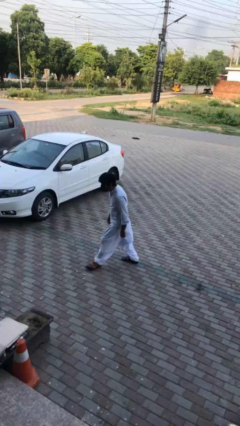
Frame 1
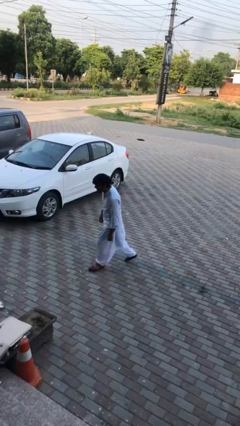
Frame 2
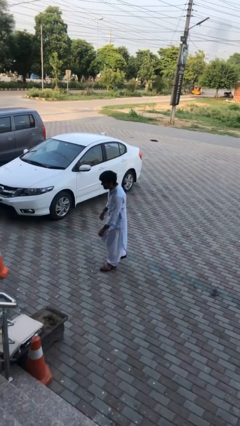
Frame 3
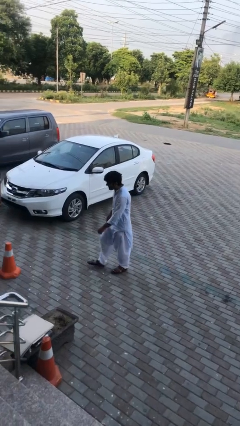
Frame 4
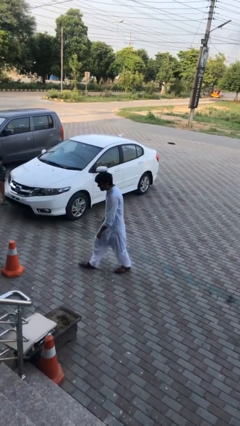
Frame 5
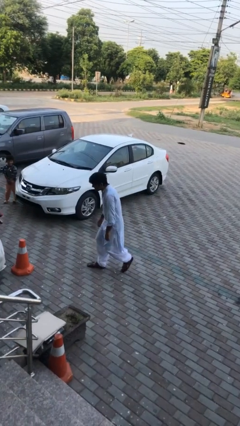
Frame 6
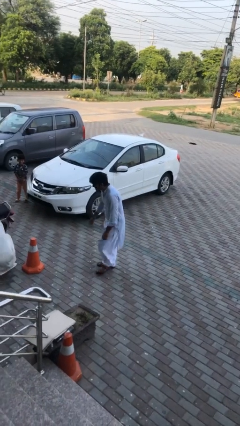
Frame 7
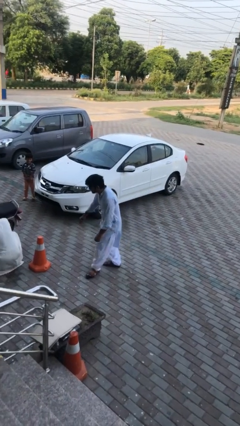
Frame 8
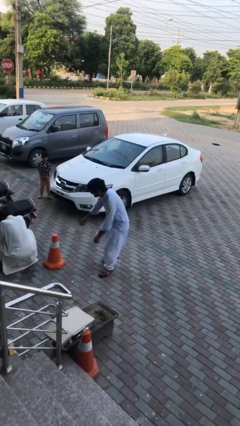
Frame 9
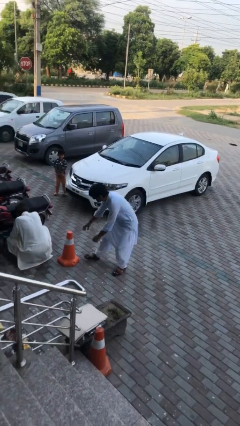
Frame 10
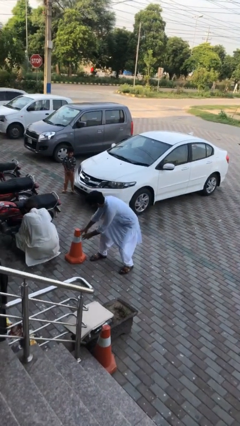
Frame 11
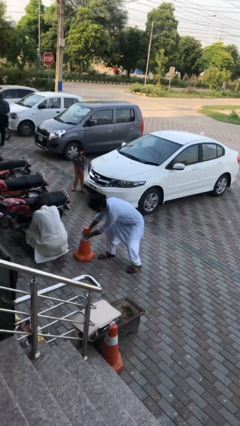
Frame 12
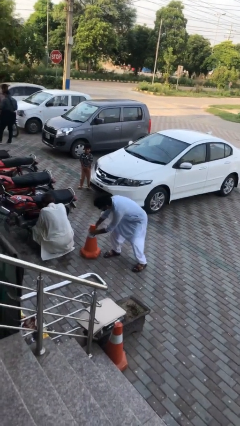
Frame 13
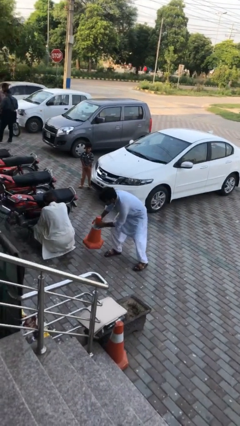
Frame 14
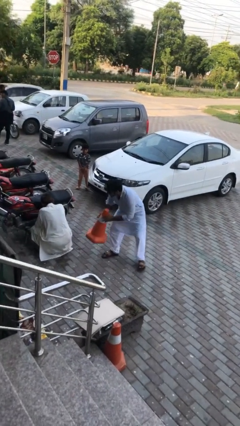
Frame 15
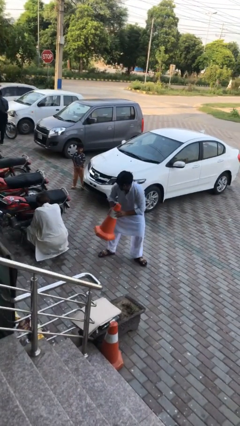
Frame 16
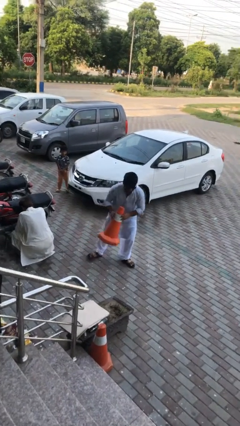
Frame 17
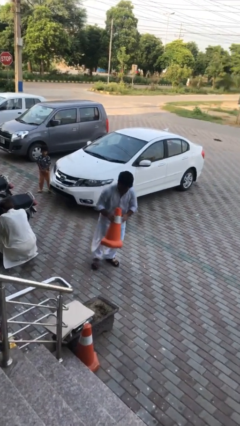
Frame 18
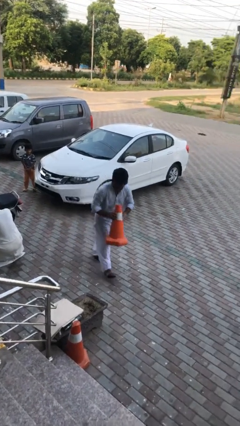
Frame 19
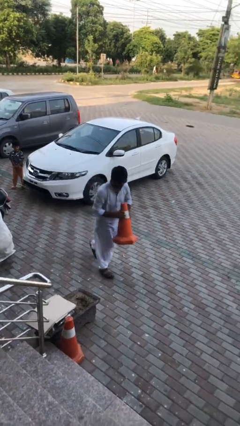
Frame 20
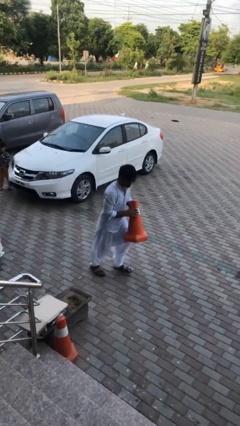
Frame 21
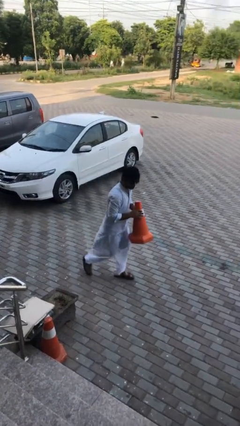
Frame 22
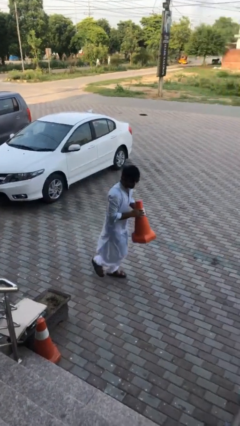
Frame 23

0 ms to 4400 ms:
person steals object from person

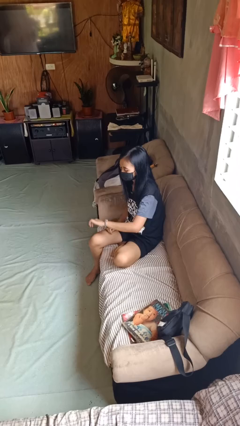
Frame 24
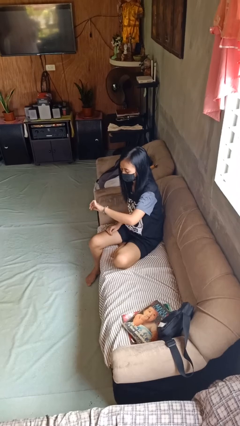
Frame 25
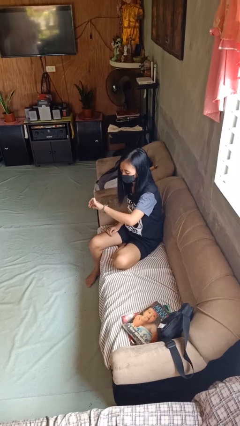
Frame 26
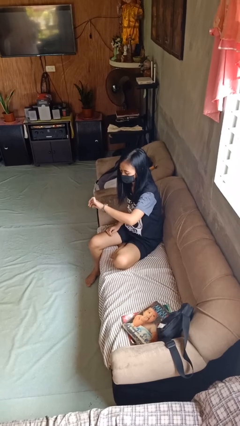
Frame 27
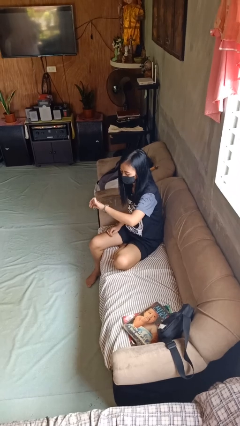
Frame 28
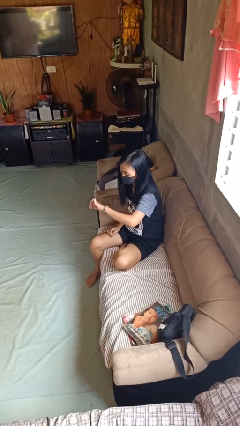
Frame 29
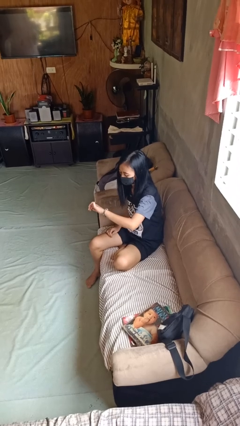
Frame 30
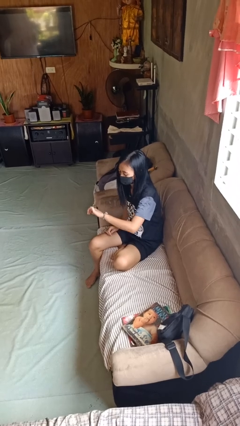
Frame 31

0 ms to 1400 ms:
person looks at wristwatch

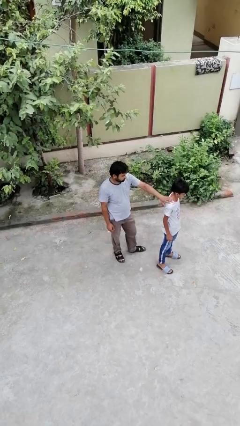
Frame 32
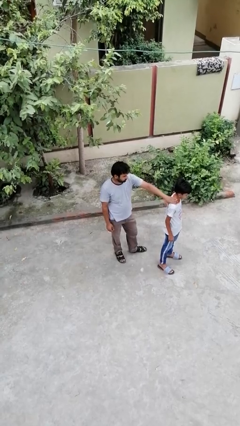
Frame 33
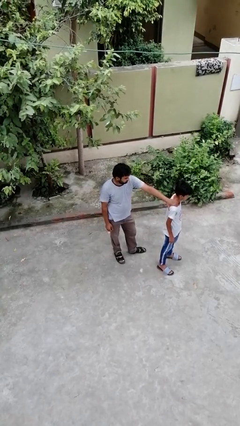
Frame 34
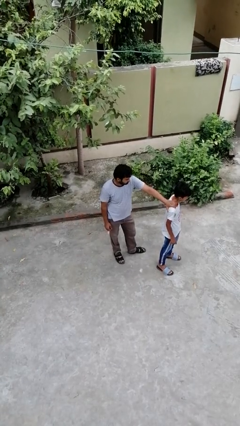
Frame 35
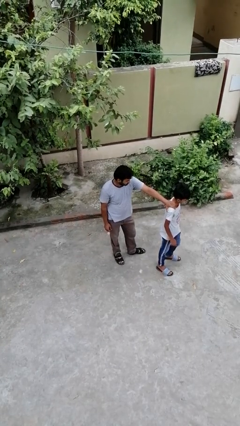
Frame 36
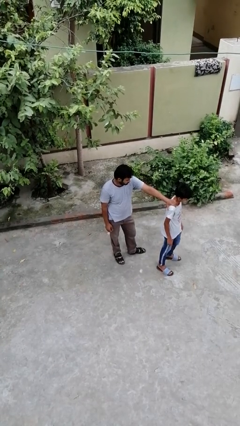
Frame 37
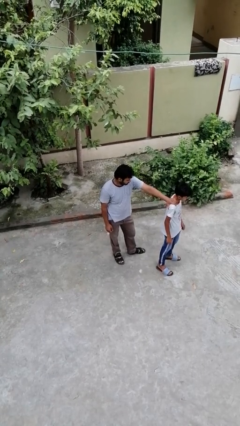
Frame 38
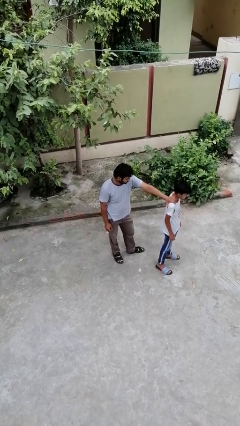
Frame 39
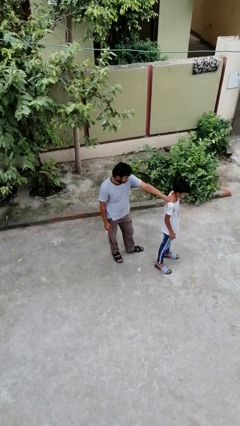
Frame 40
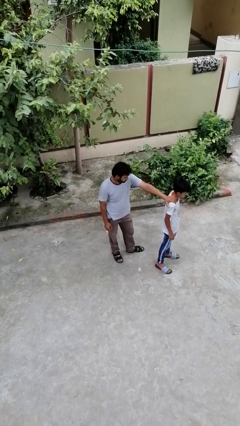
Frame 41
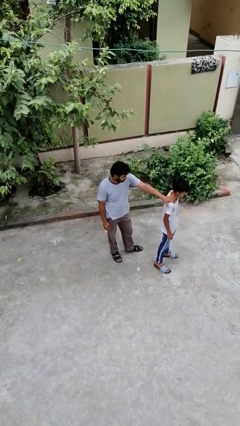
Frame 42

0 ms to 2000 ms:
person grabs person by shoulder

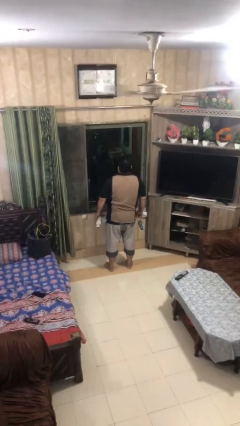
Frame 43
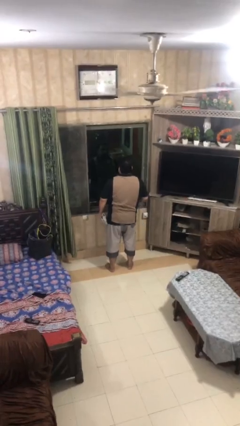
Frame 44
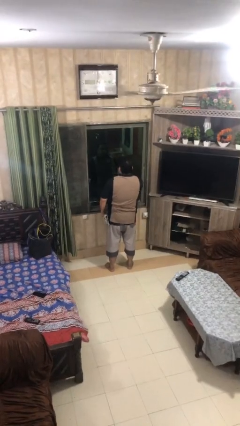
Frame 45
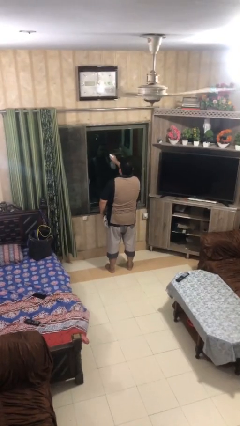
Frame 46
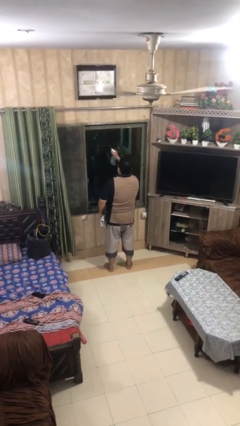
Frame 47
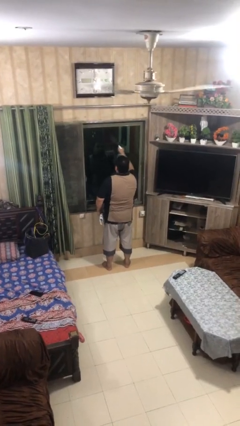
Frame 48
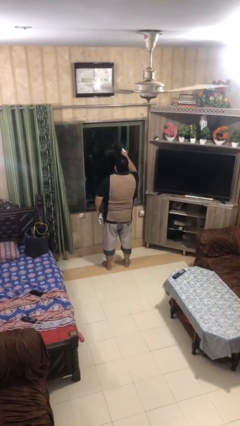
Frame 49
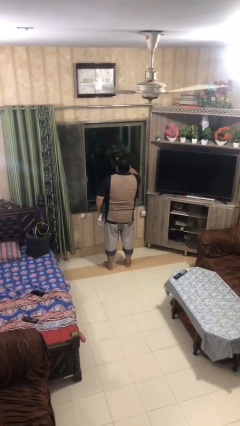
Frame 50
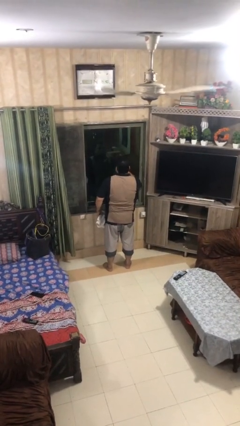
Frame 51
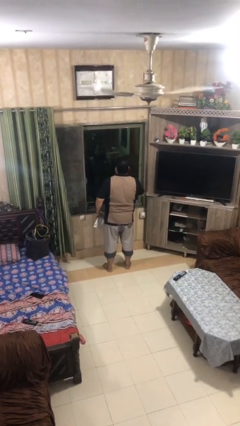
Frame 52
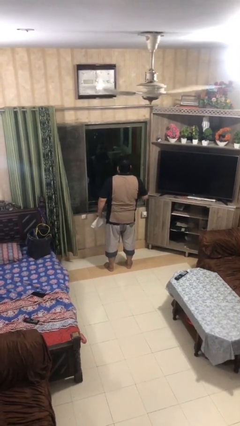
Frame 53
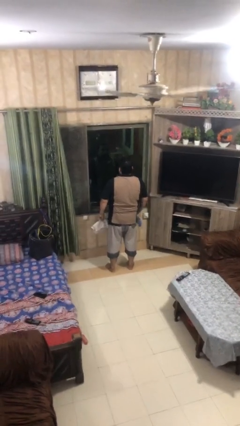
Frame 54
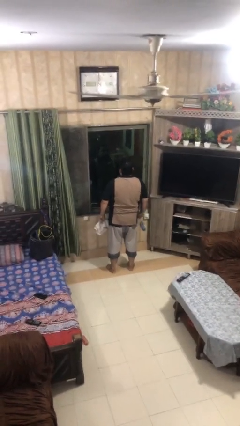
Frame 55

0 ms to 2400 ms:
person sprays from bottle

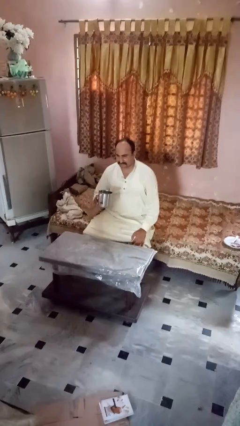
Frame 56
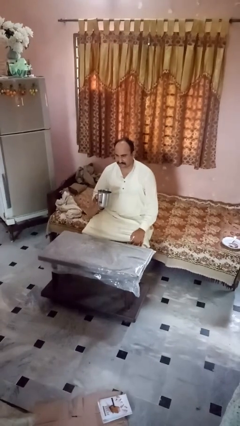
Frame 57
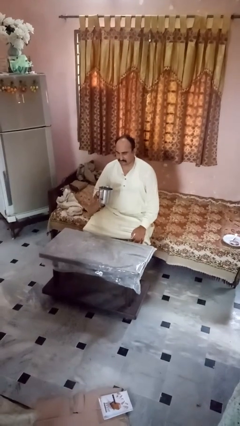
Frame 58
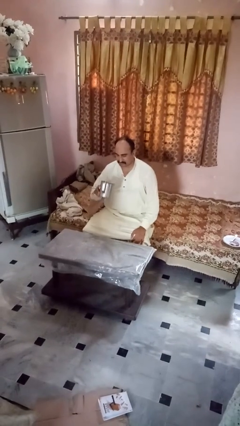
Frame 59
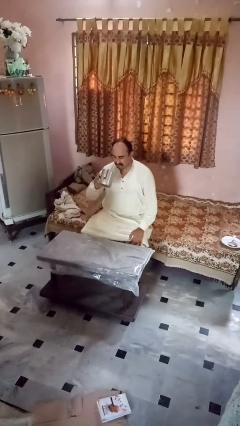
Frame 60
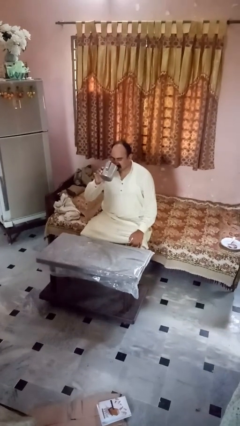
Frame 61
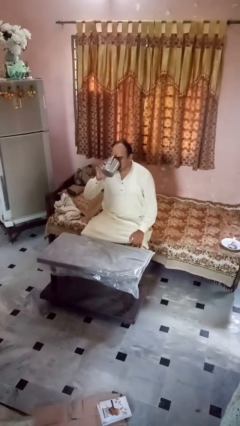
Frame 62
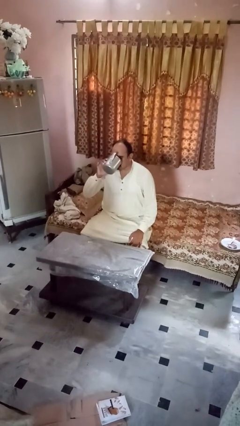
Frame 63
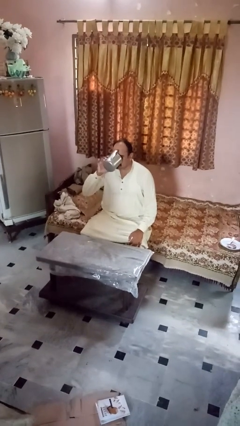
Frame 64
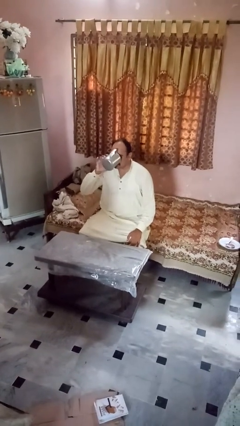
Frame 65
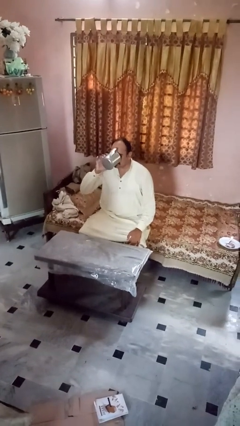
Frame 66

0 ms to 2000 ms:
person drinks from mug

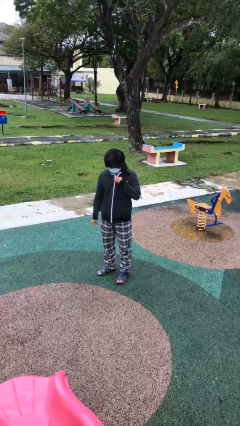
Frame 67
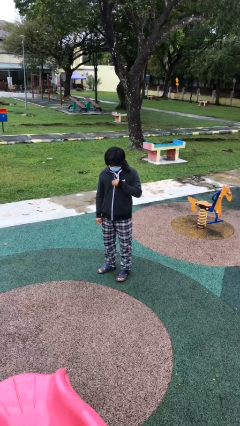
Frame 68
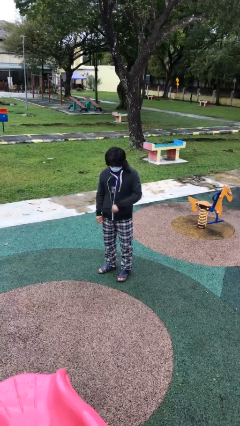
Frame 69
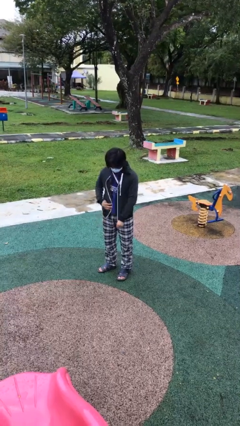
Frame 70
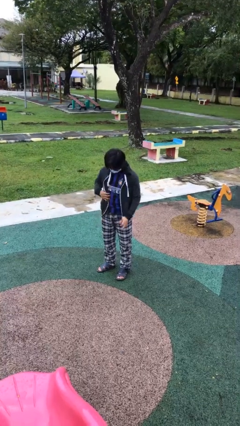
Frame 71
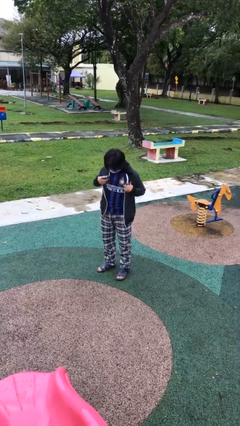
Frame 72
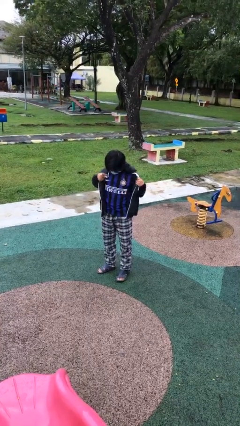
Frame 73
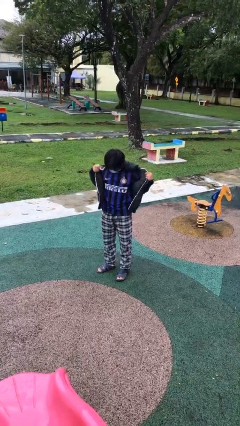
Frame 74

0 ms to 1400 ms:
person unzips jacket

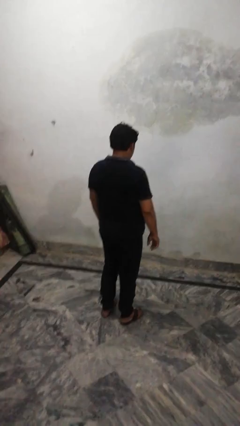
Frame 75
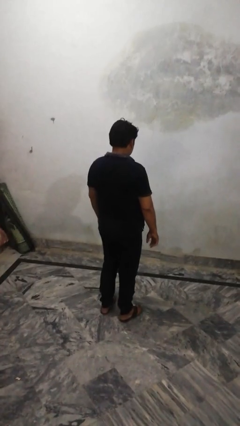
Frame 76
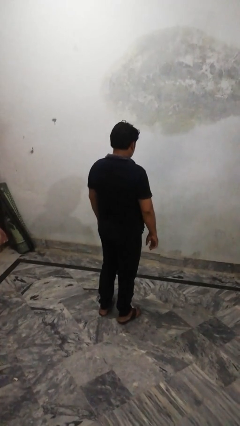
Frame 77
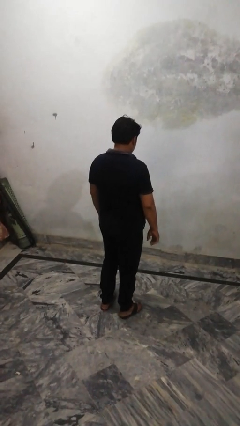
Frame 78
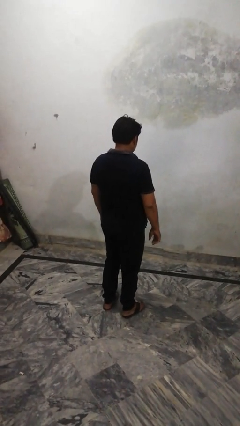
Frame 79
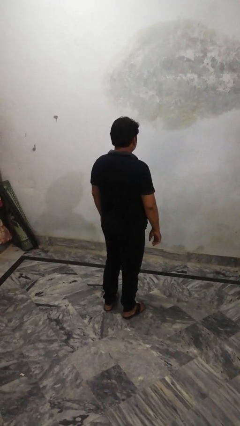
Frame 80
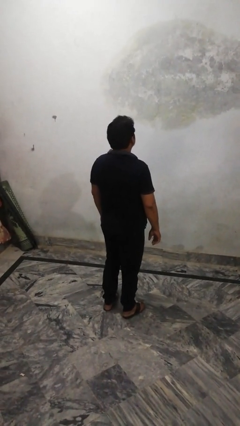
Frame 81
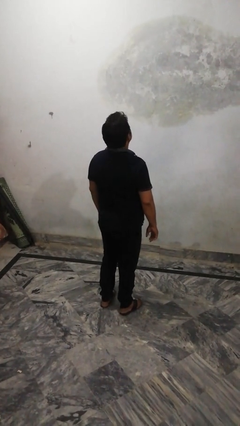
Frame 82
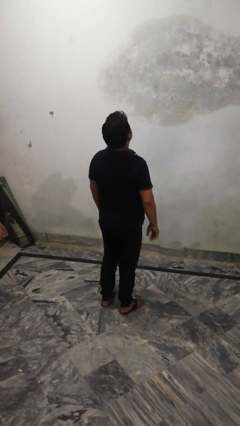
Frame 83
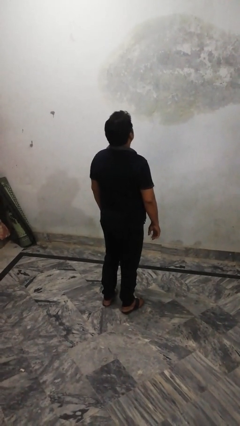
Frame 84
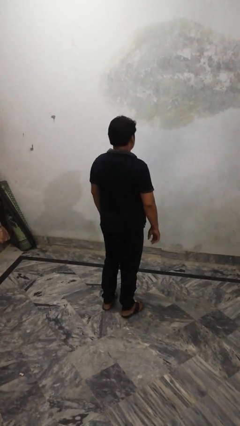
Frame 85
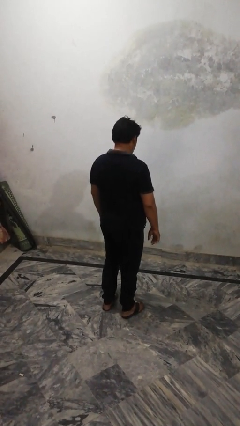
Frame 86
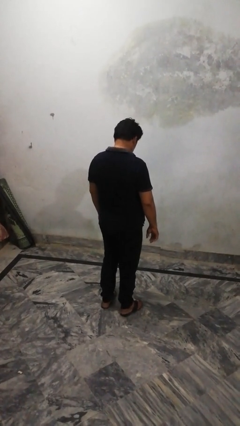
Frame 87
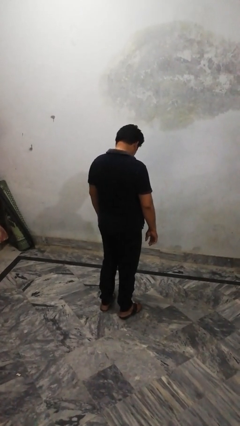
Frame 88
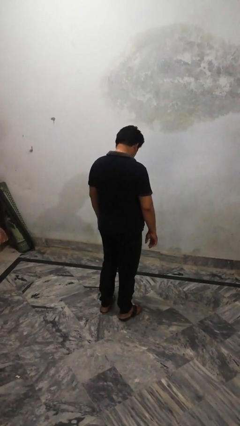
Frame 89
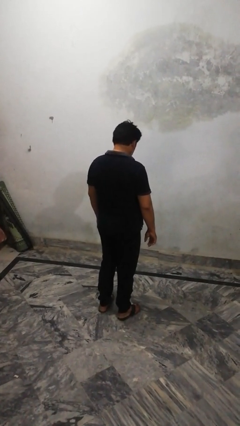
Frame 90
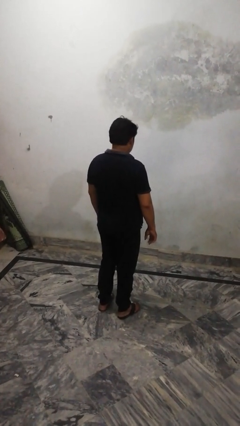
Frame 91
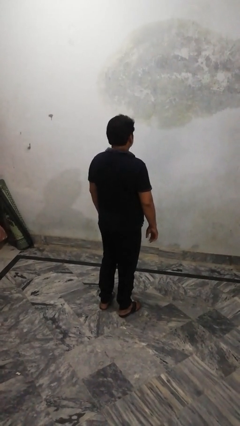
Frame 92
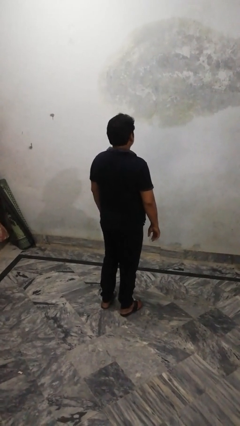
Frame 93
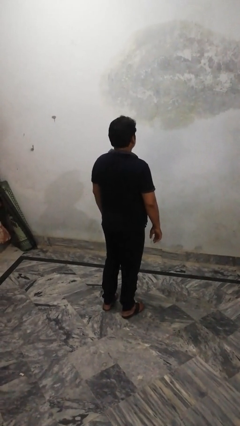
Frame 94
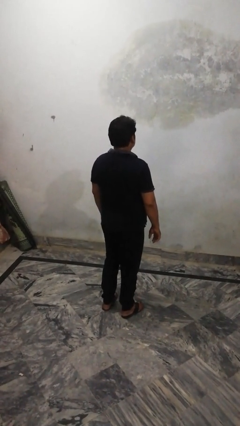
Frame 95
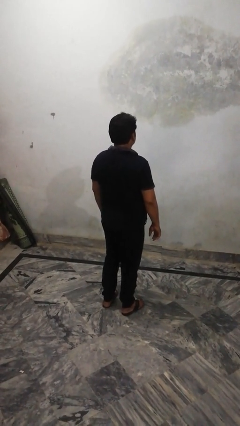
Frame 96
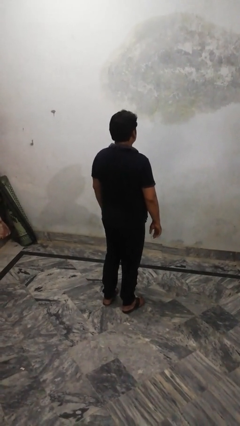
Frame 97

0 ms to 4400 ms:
person nods head
